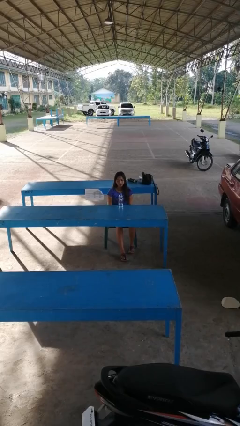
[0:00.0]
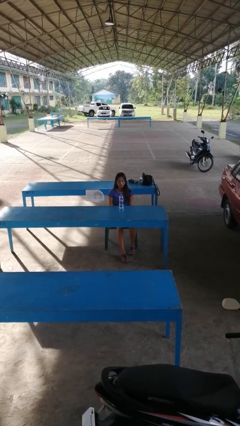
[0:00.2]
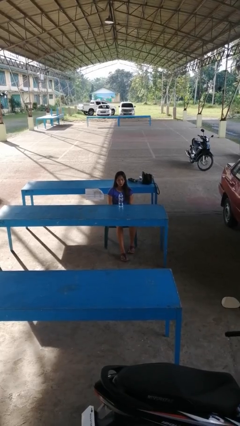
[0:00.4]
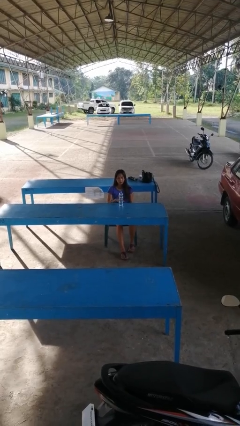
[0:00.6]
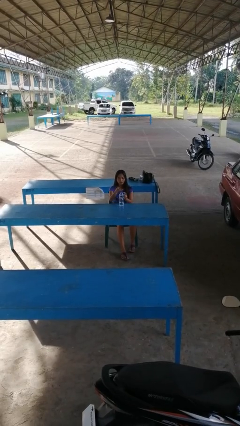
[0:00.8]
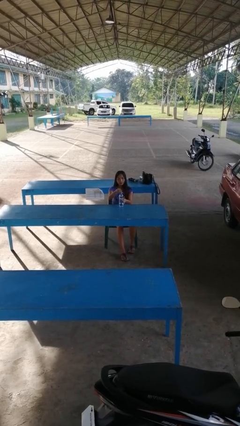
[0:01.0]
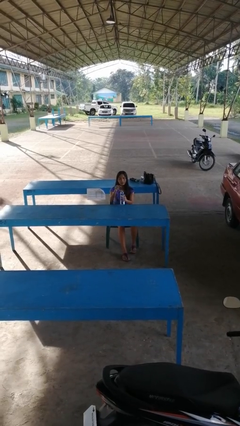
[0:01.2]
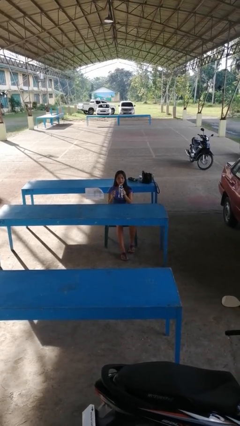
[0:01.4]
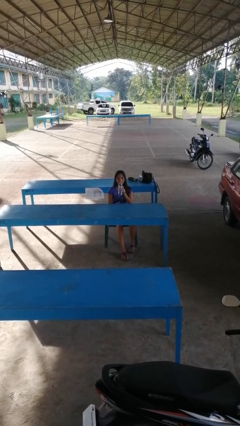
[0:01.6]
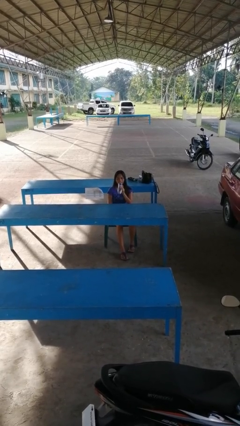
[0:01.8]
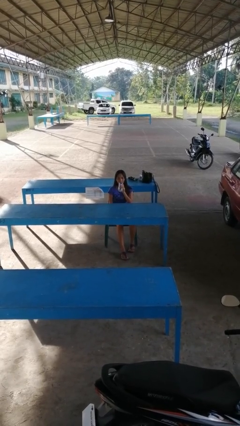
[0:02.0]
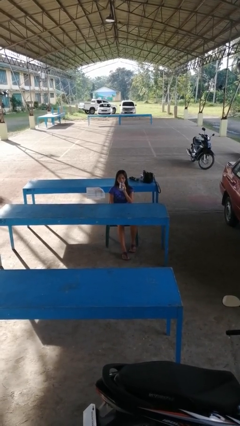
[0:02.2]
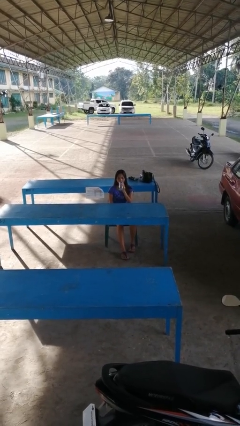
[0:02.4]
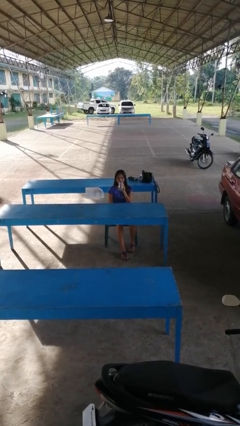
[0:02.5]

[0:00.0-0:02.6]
person drinks from bottle

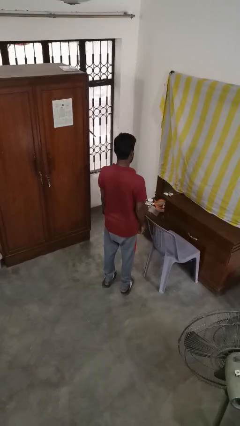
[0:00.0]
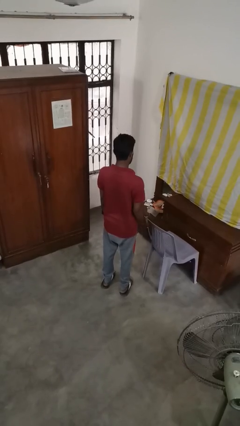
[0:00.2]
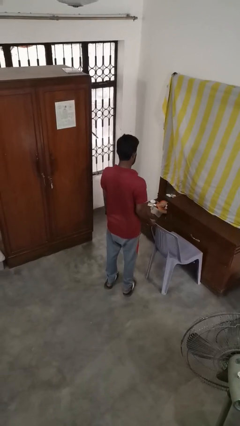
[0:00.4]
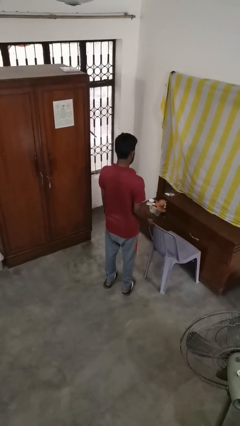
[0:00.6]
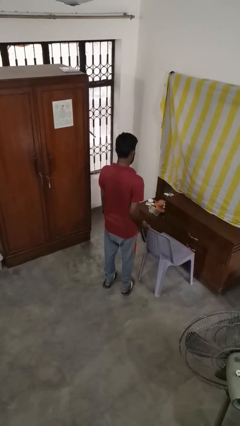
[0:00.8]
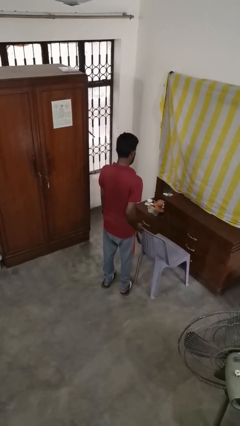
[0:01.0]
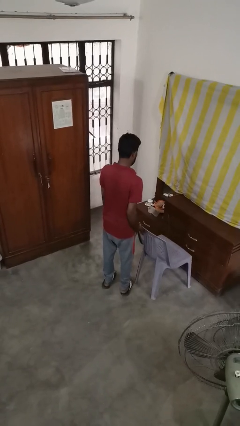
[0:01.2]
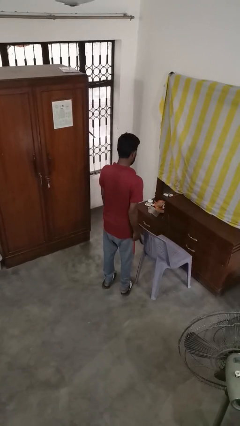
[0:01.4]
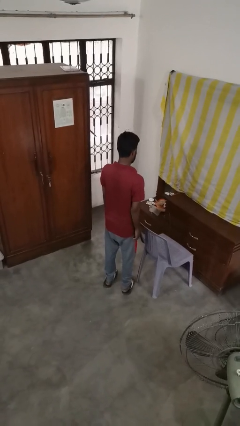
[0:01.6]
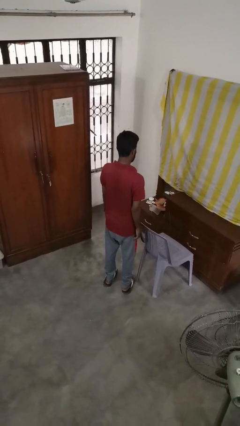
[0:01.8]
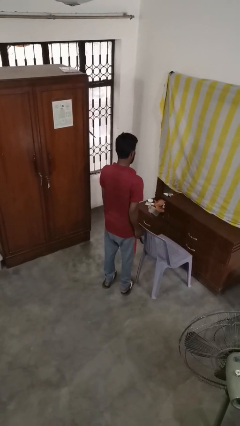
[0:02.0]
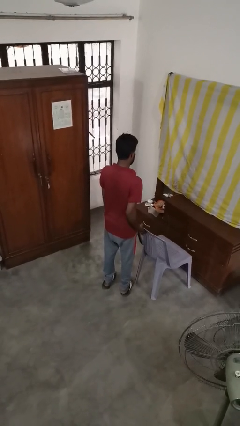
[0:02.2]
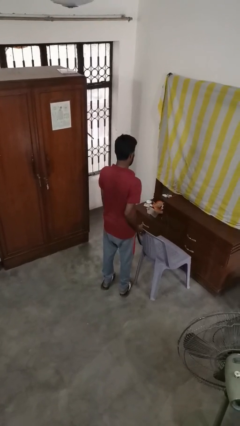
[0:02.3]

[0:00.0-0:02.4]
person pulls out chair

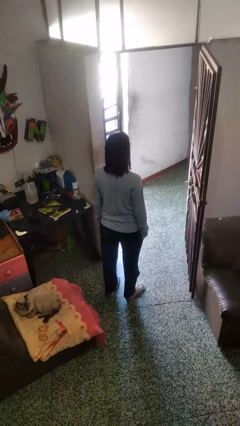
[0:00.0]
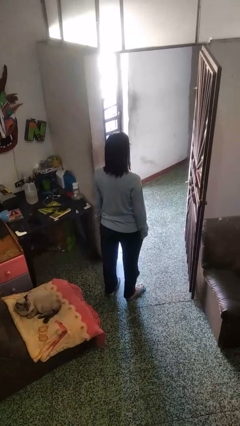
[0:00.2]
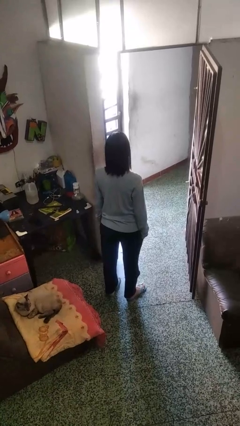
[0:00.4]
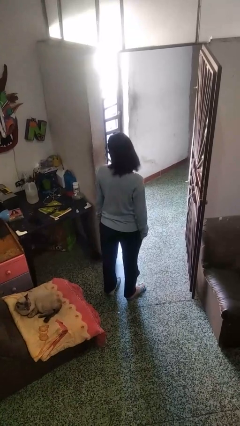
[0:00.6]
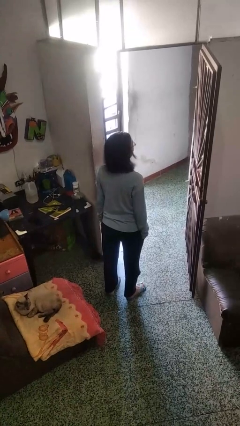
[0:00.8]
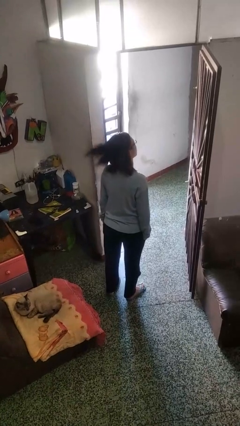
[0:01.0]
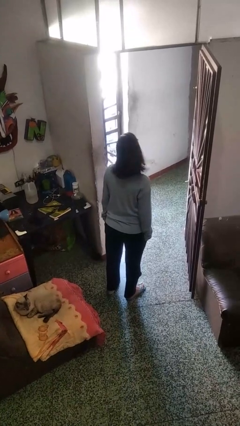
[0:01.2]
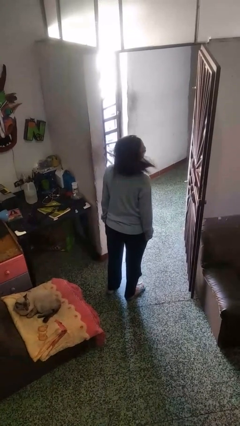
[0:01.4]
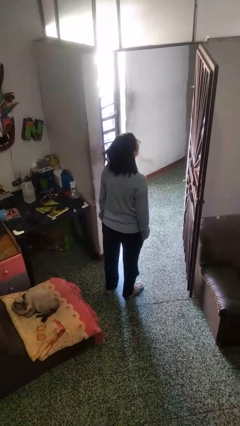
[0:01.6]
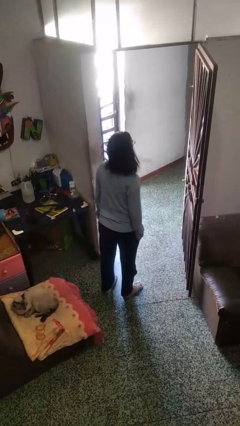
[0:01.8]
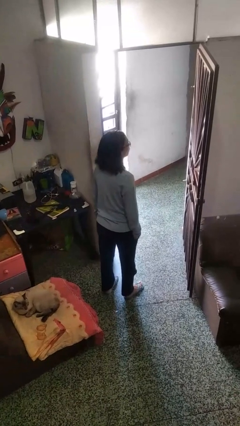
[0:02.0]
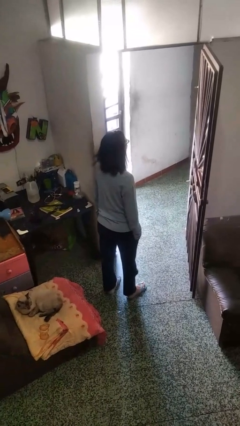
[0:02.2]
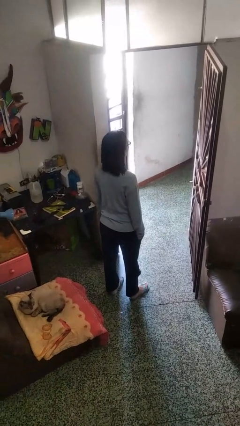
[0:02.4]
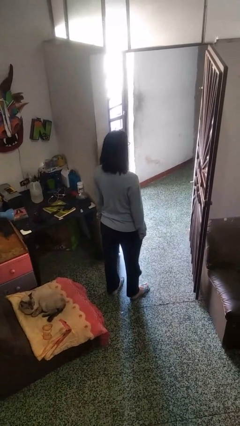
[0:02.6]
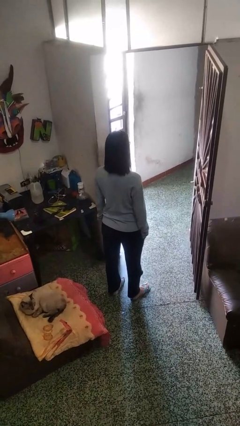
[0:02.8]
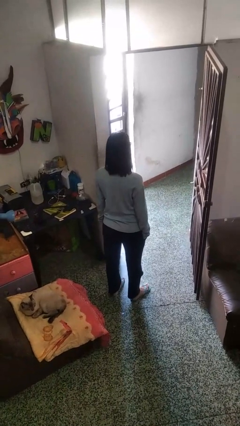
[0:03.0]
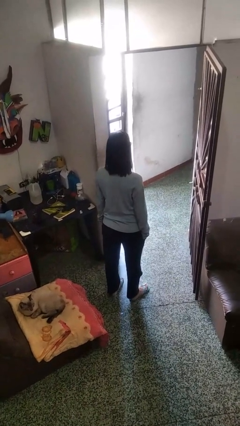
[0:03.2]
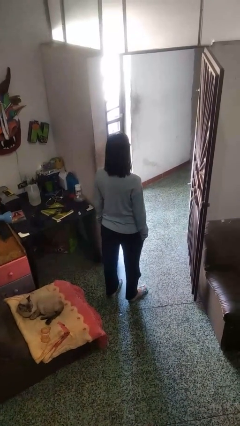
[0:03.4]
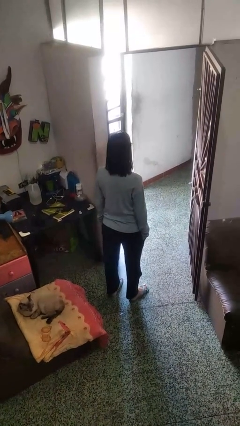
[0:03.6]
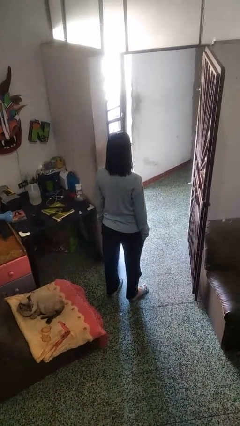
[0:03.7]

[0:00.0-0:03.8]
person shakes head

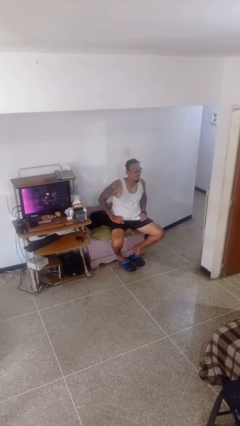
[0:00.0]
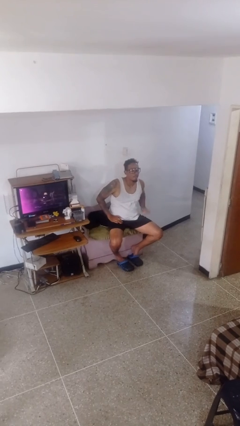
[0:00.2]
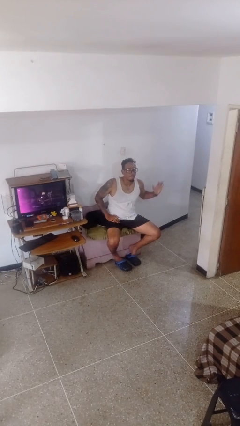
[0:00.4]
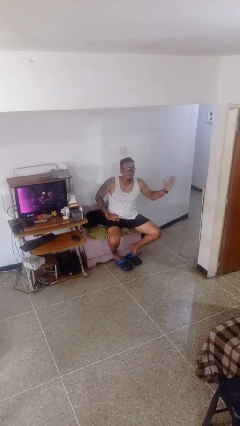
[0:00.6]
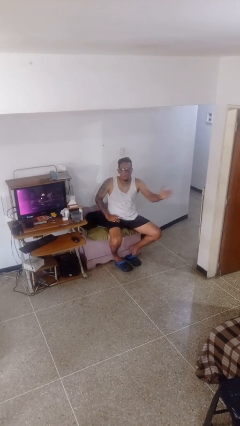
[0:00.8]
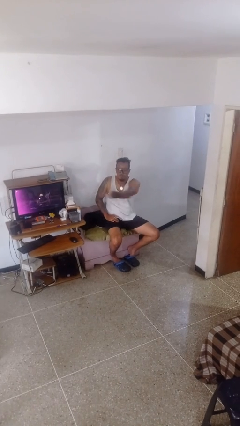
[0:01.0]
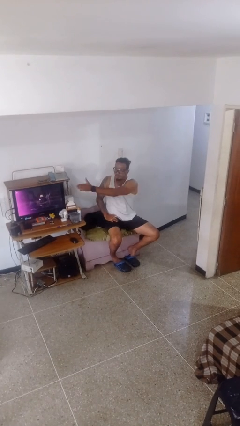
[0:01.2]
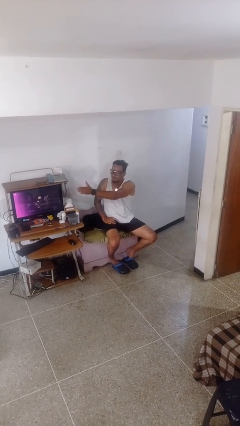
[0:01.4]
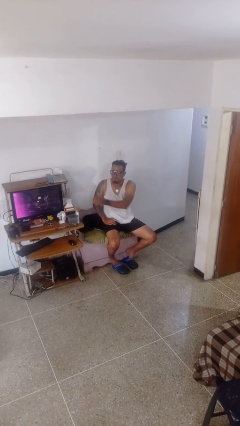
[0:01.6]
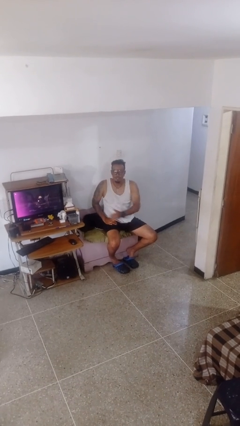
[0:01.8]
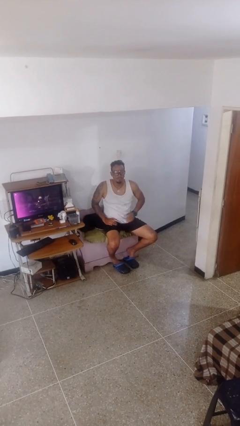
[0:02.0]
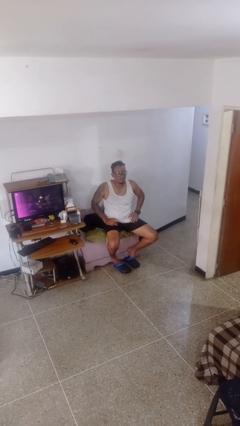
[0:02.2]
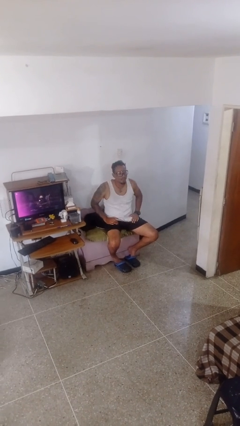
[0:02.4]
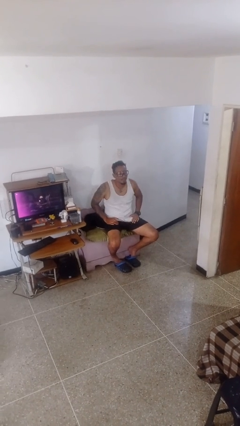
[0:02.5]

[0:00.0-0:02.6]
person gestures swipe right

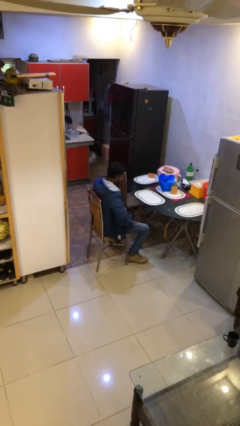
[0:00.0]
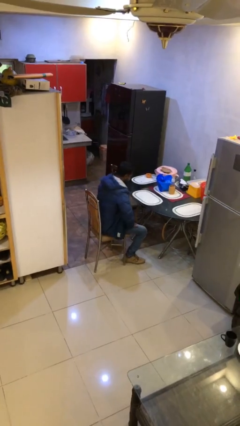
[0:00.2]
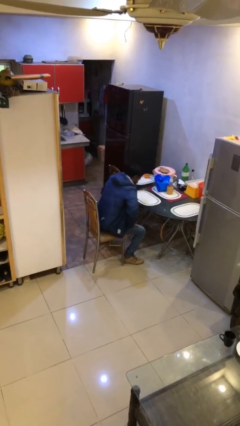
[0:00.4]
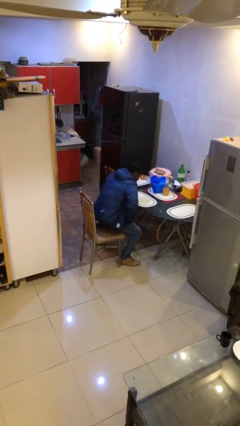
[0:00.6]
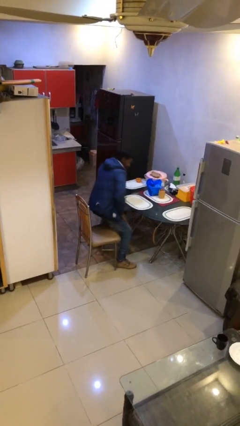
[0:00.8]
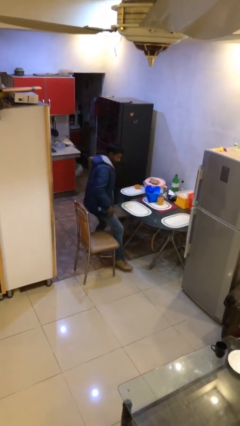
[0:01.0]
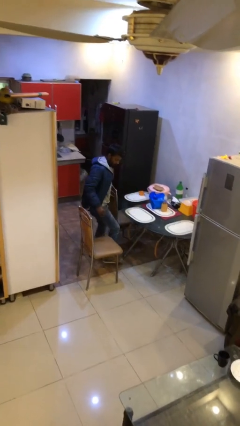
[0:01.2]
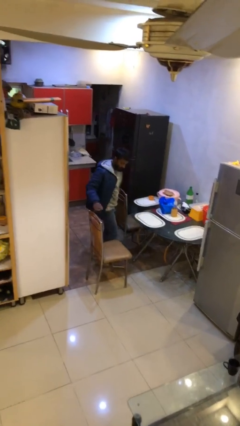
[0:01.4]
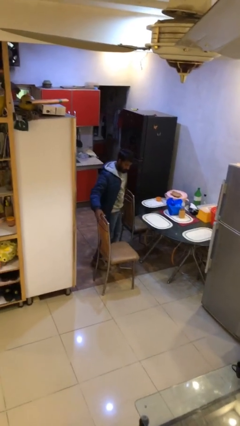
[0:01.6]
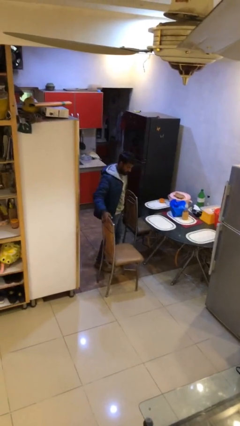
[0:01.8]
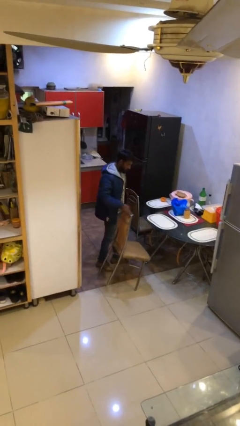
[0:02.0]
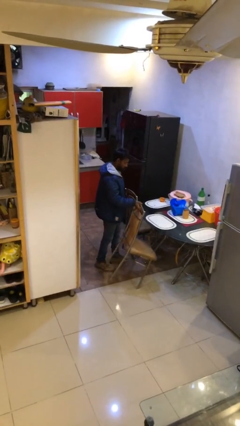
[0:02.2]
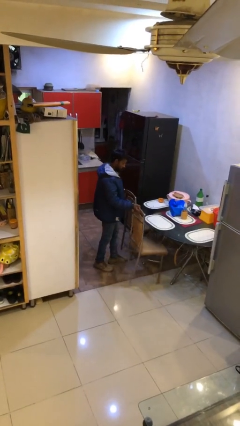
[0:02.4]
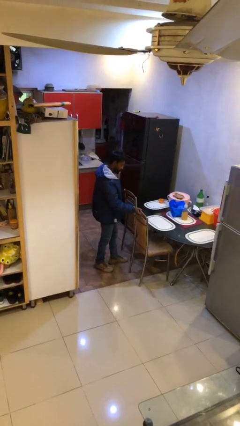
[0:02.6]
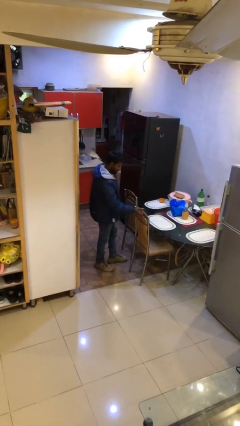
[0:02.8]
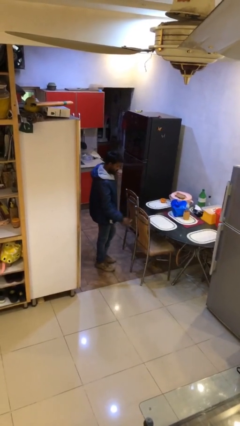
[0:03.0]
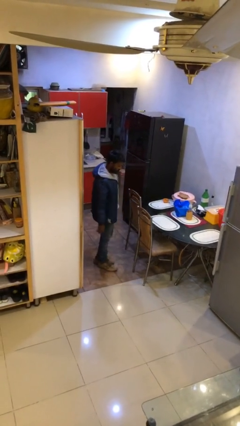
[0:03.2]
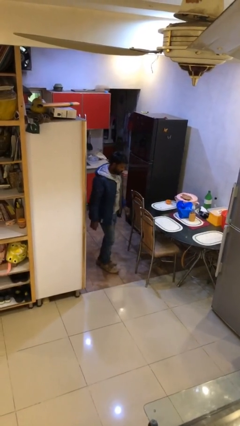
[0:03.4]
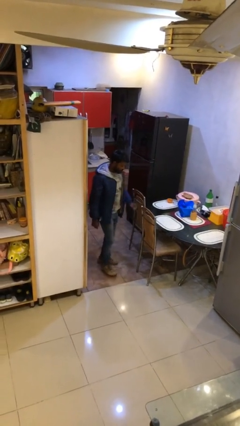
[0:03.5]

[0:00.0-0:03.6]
person stands up

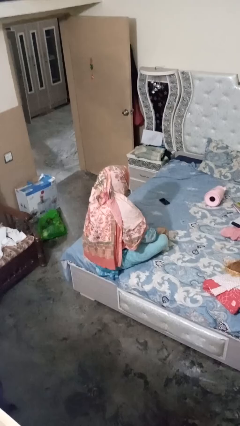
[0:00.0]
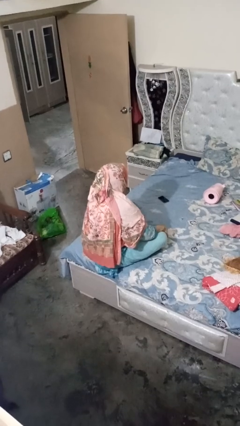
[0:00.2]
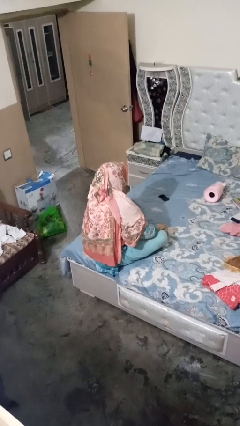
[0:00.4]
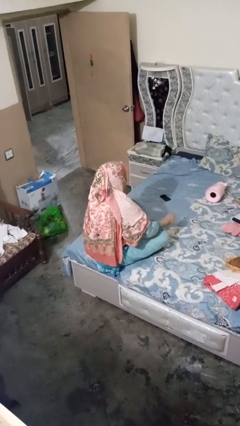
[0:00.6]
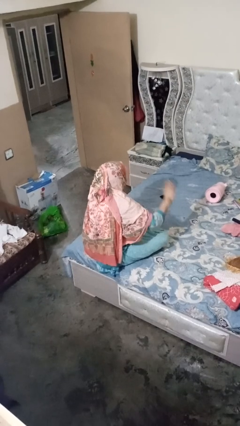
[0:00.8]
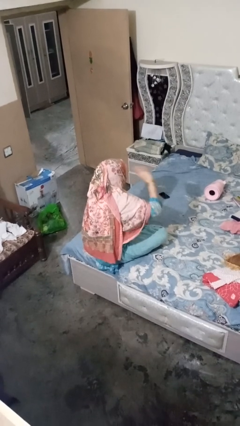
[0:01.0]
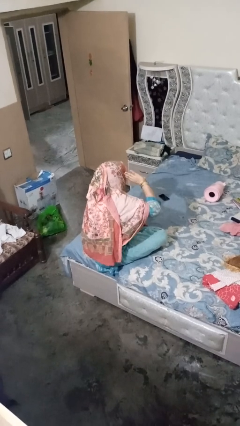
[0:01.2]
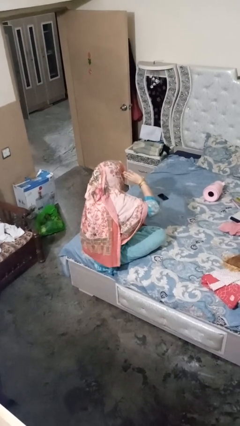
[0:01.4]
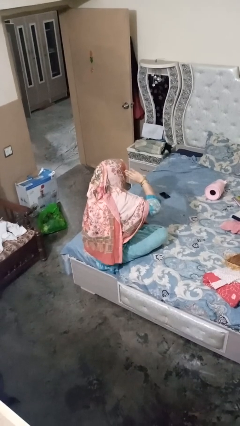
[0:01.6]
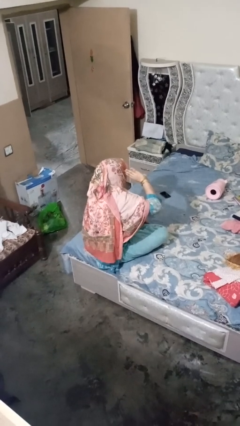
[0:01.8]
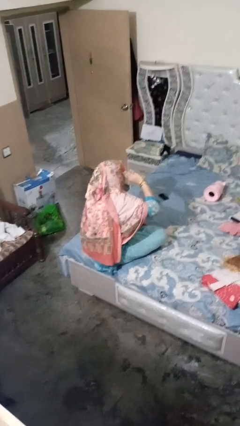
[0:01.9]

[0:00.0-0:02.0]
person salutes

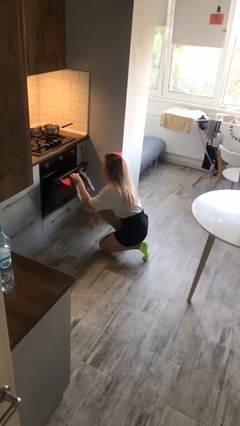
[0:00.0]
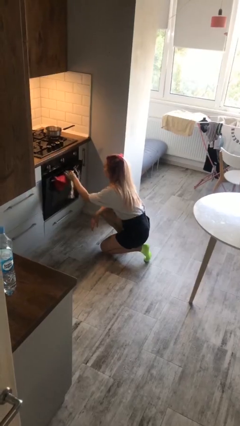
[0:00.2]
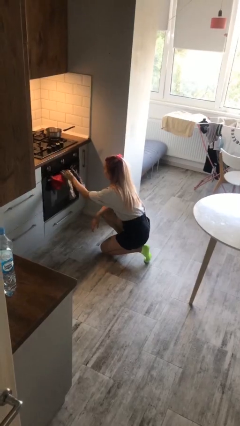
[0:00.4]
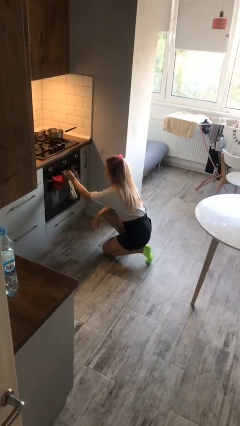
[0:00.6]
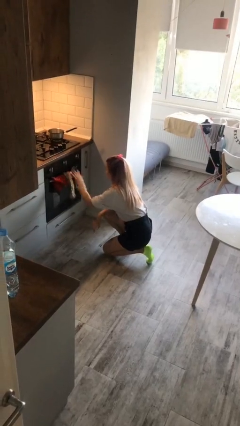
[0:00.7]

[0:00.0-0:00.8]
person closes oven door
